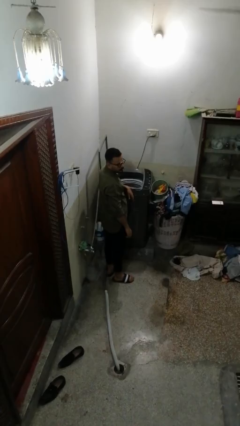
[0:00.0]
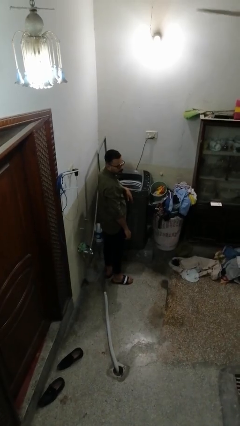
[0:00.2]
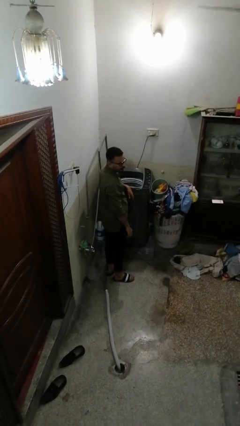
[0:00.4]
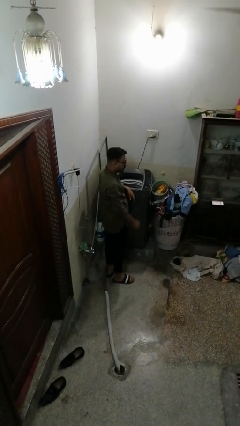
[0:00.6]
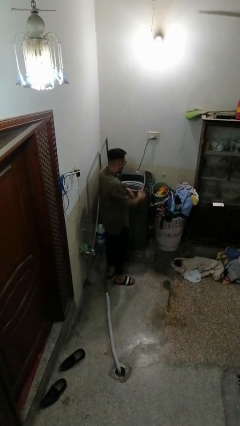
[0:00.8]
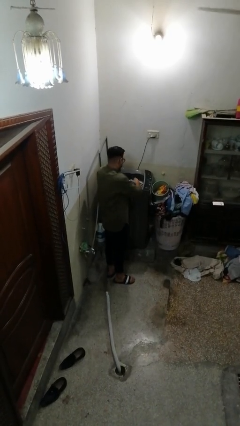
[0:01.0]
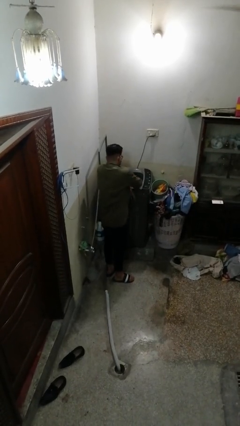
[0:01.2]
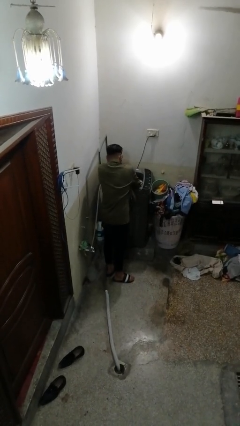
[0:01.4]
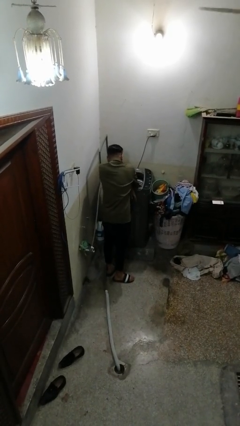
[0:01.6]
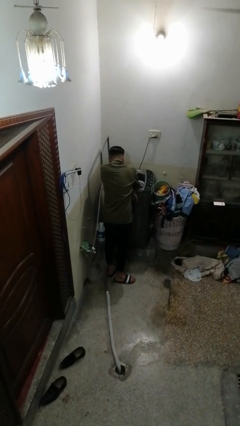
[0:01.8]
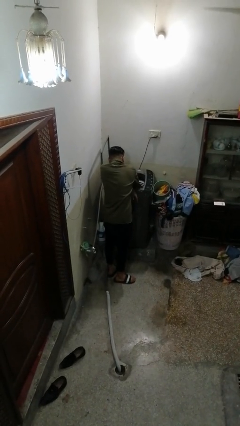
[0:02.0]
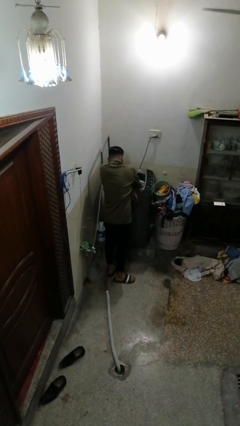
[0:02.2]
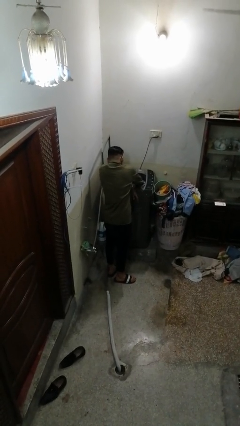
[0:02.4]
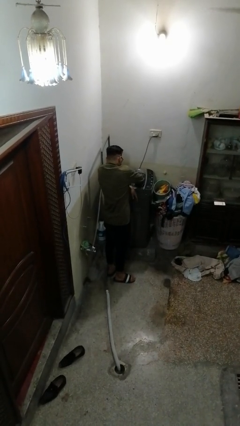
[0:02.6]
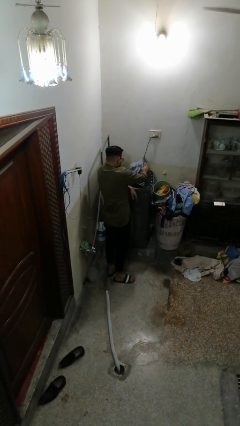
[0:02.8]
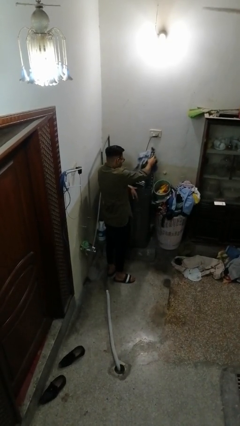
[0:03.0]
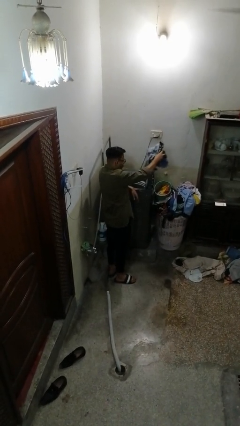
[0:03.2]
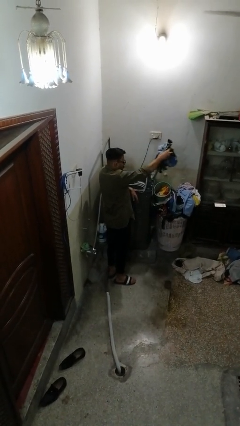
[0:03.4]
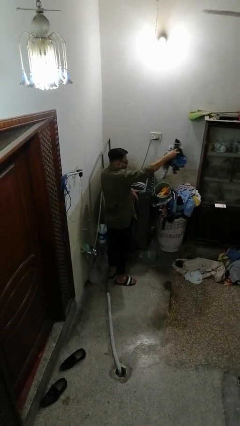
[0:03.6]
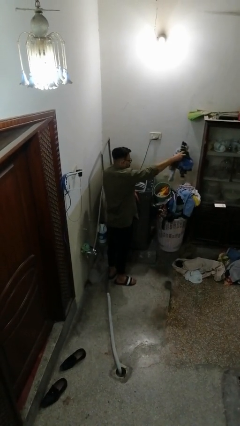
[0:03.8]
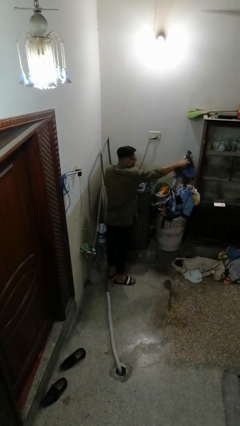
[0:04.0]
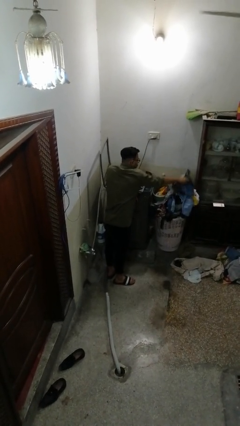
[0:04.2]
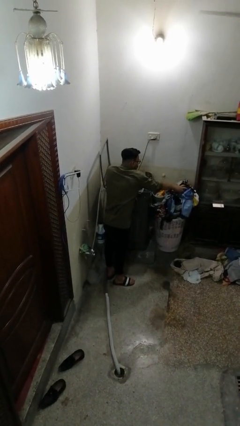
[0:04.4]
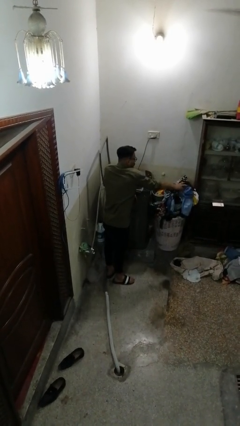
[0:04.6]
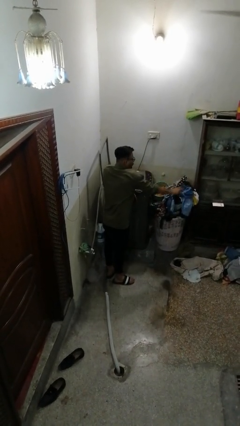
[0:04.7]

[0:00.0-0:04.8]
person unloads clotheswasher

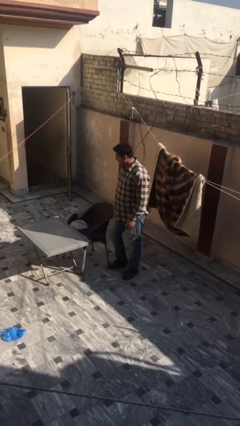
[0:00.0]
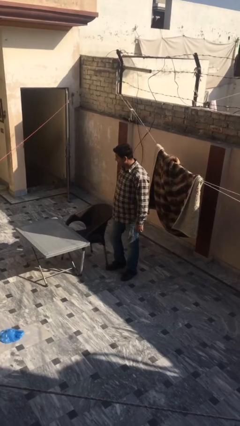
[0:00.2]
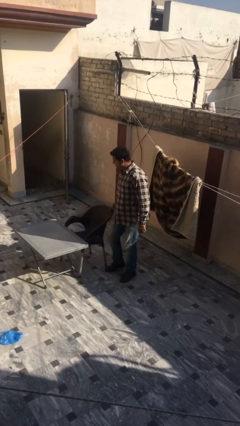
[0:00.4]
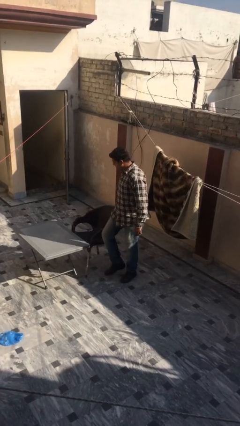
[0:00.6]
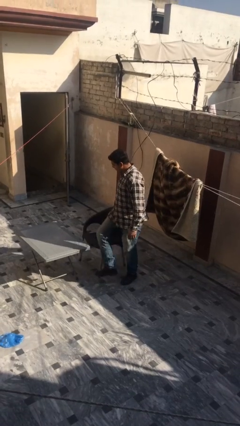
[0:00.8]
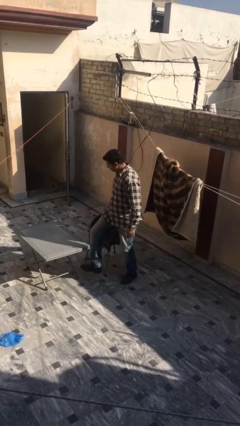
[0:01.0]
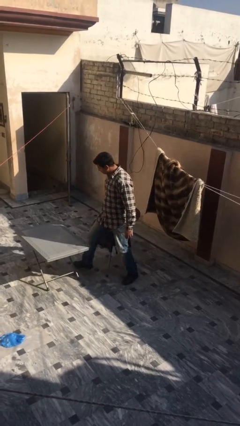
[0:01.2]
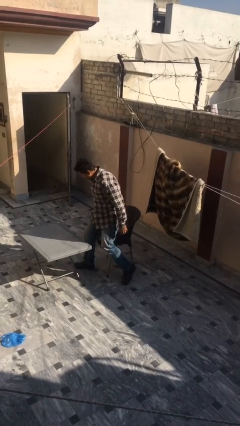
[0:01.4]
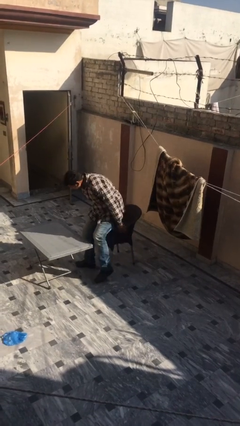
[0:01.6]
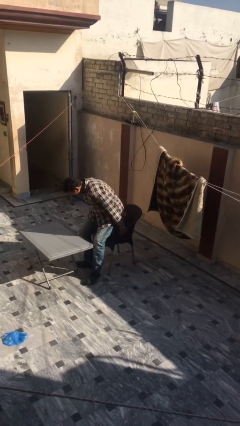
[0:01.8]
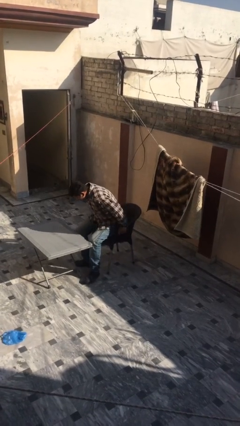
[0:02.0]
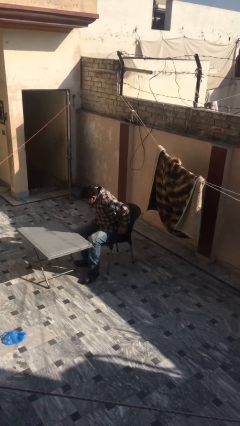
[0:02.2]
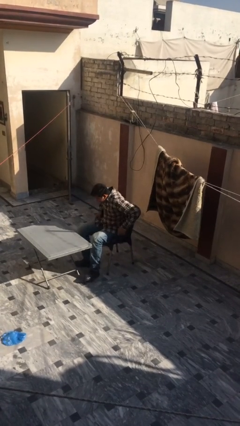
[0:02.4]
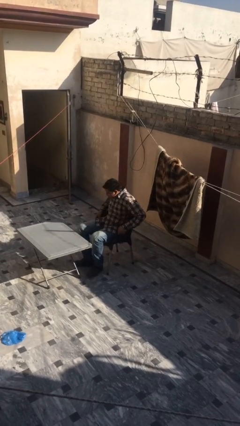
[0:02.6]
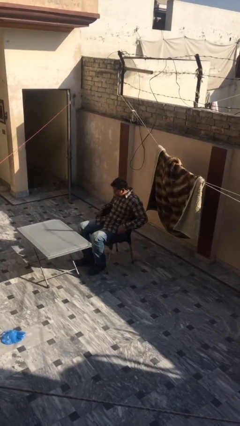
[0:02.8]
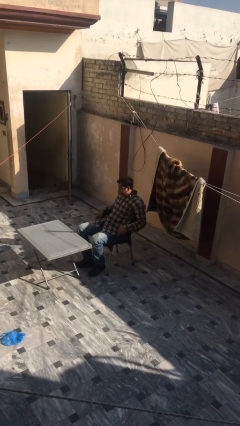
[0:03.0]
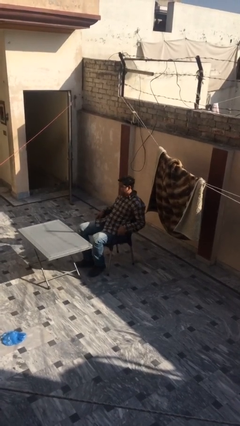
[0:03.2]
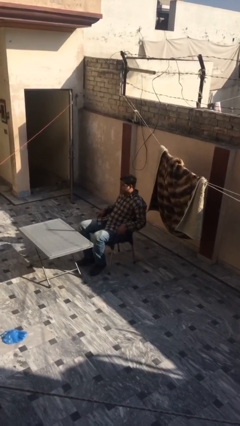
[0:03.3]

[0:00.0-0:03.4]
person sits down

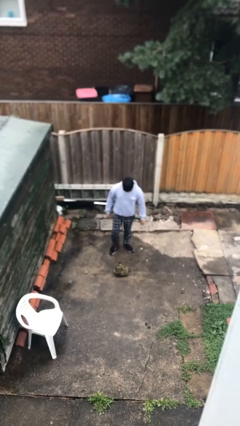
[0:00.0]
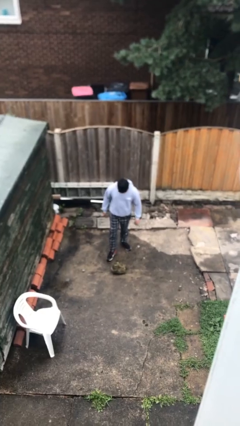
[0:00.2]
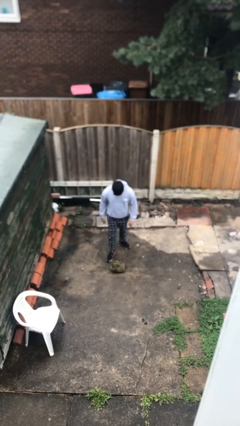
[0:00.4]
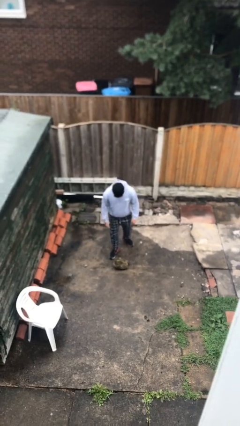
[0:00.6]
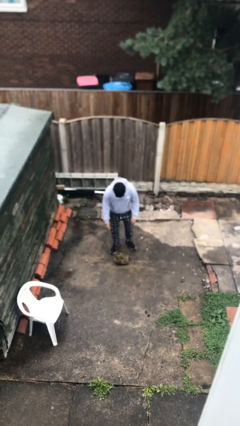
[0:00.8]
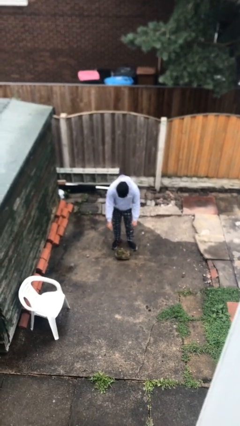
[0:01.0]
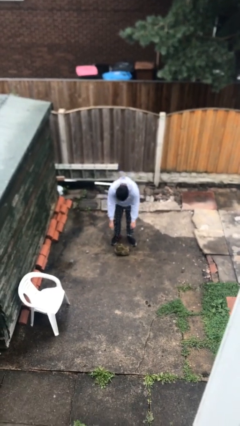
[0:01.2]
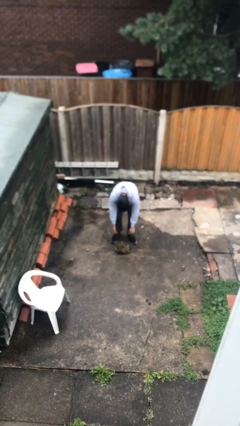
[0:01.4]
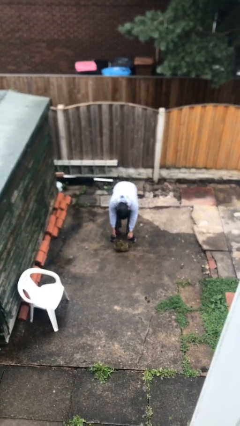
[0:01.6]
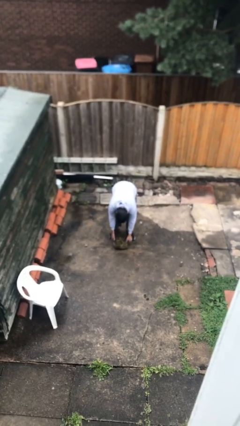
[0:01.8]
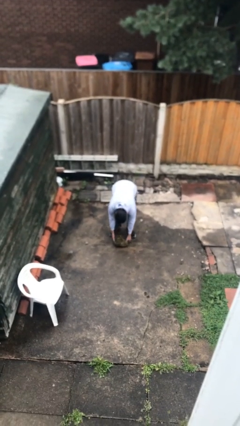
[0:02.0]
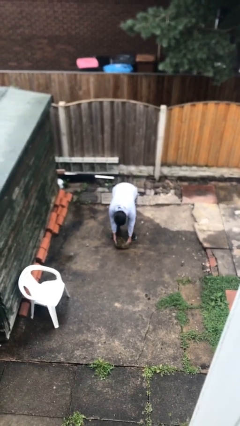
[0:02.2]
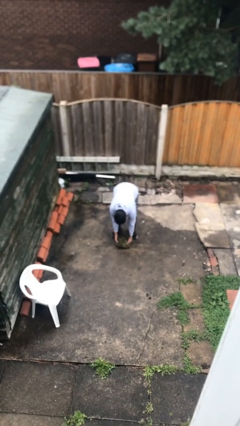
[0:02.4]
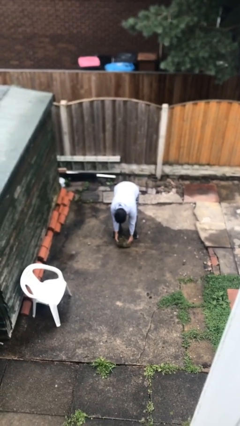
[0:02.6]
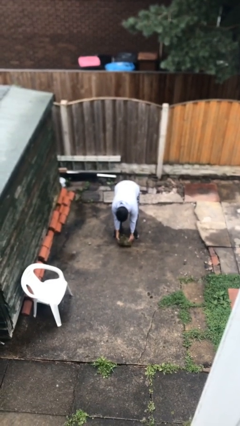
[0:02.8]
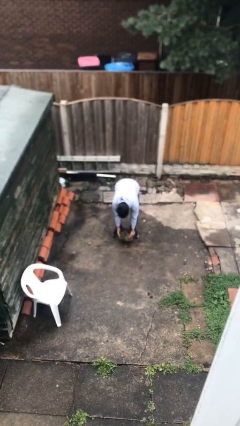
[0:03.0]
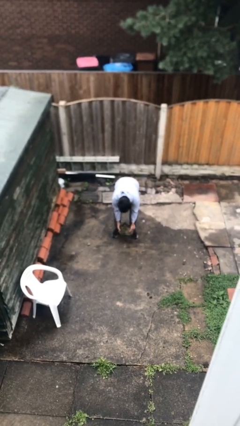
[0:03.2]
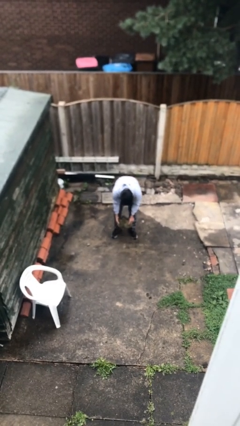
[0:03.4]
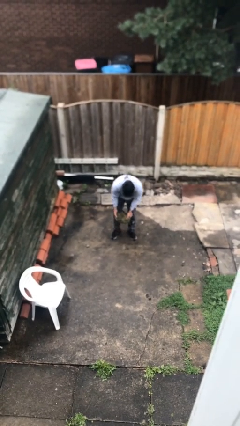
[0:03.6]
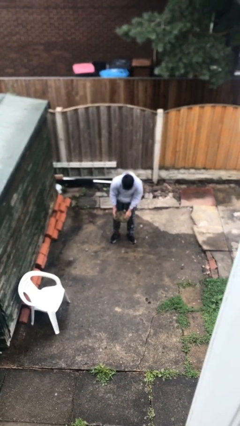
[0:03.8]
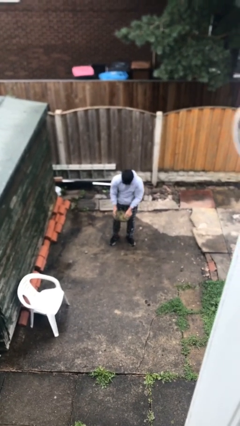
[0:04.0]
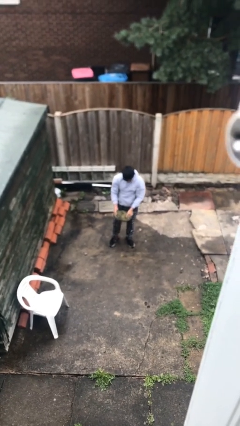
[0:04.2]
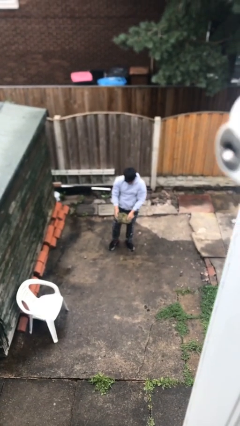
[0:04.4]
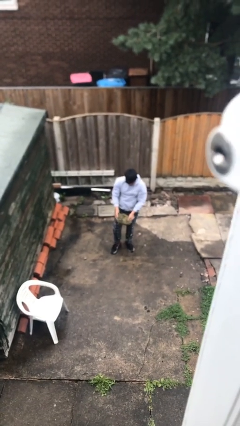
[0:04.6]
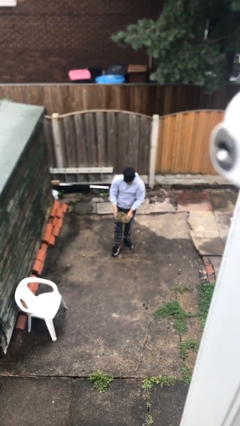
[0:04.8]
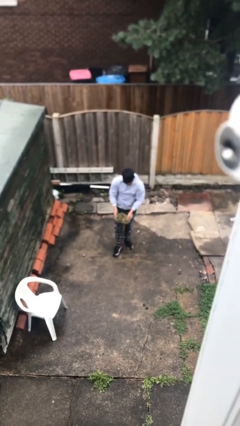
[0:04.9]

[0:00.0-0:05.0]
person picks up object from floor

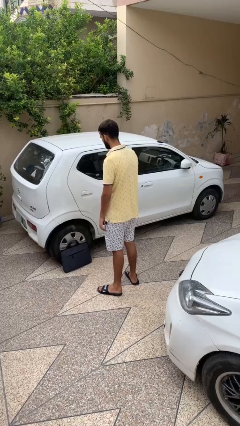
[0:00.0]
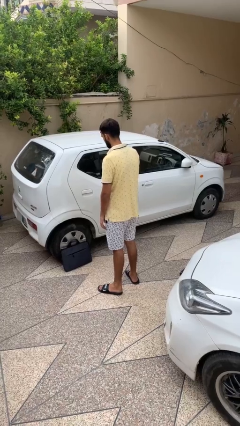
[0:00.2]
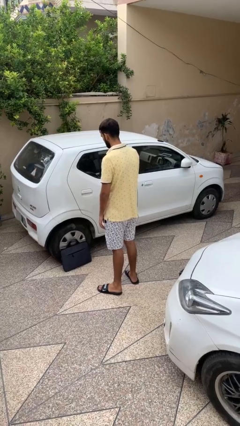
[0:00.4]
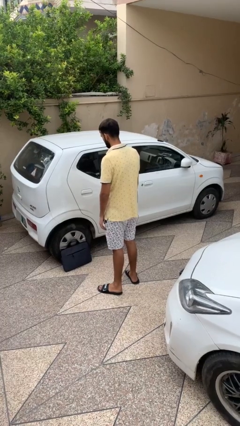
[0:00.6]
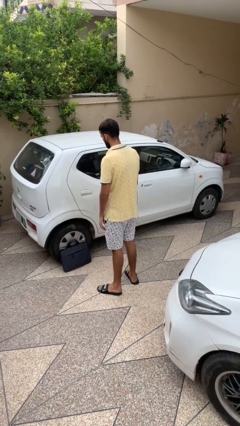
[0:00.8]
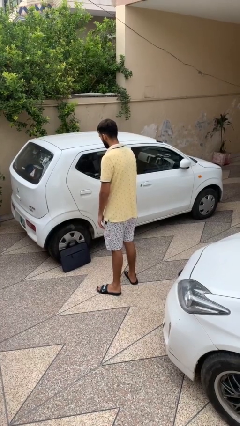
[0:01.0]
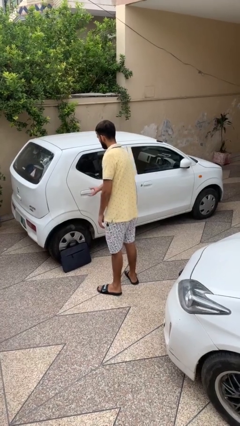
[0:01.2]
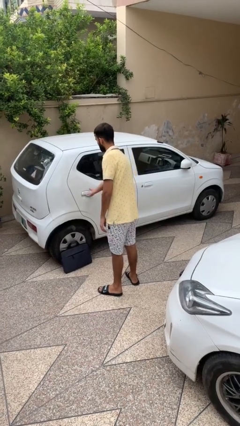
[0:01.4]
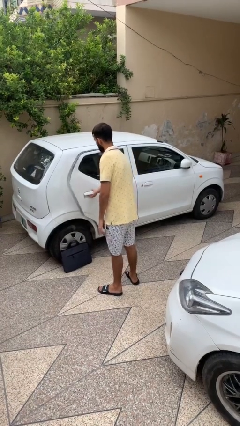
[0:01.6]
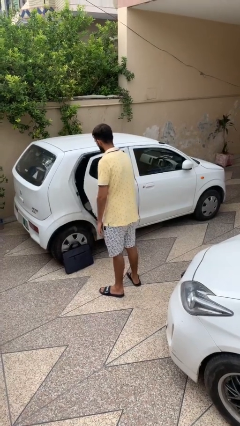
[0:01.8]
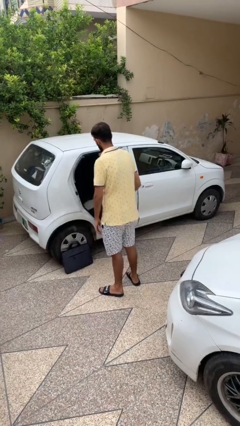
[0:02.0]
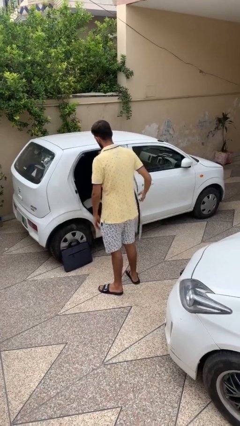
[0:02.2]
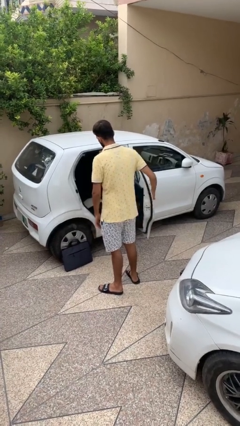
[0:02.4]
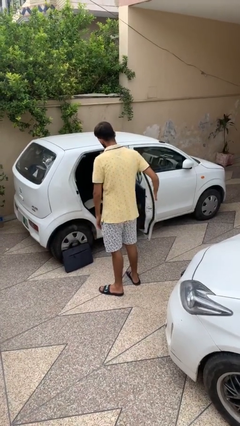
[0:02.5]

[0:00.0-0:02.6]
person opens car door

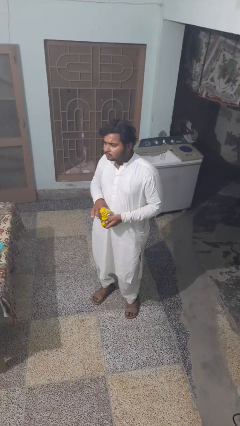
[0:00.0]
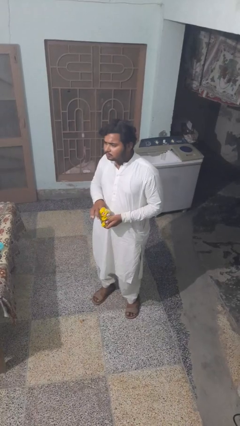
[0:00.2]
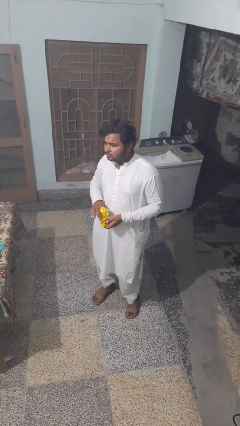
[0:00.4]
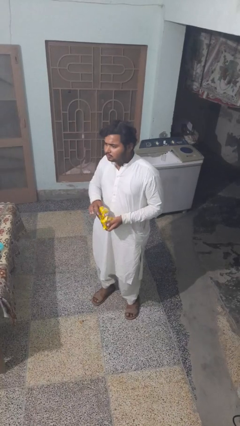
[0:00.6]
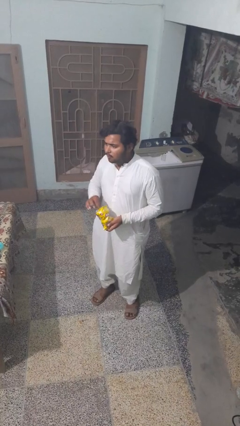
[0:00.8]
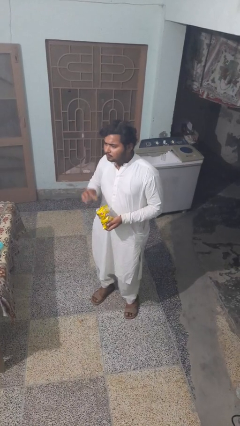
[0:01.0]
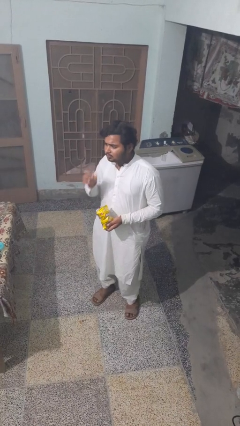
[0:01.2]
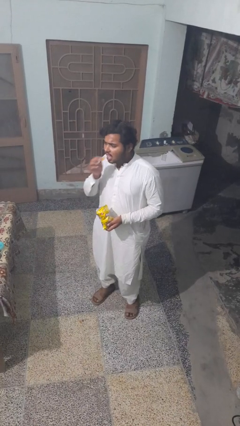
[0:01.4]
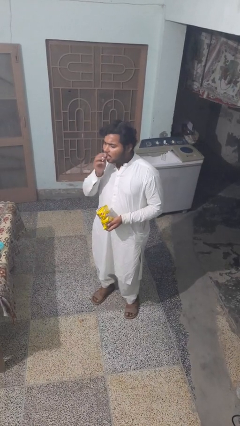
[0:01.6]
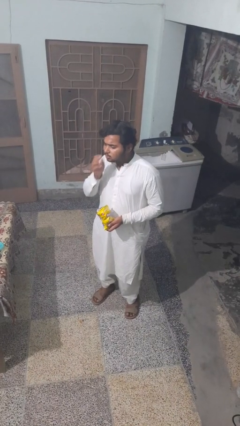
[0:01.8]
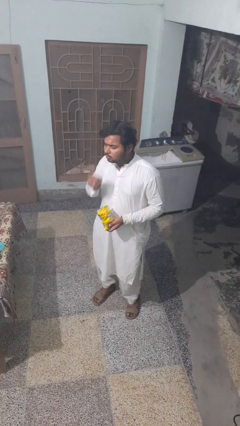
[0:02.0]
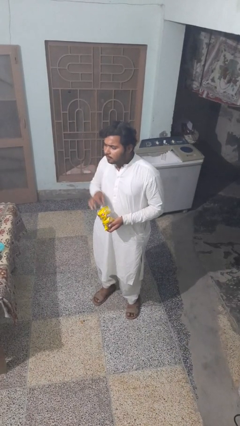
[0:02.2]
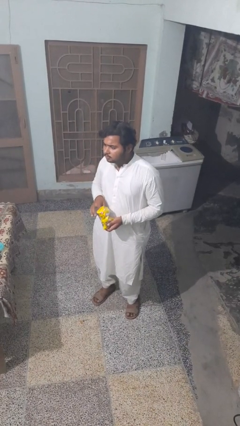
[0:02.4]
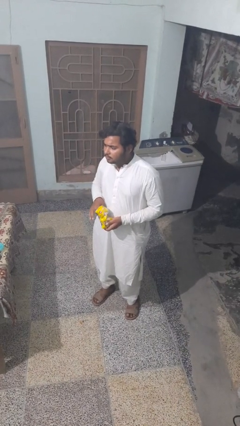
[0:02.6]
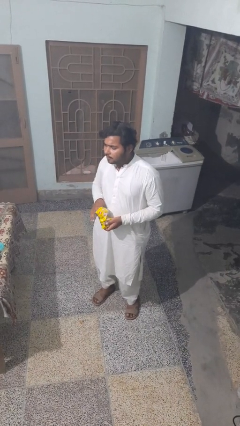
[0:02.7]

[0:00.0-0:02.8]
person eats snack from bag
